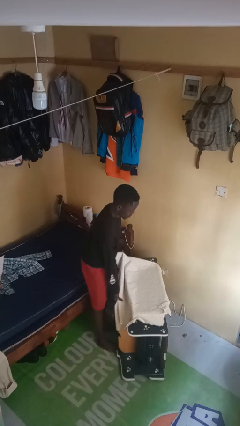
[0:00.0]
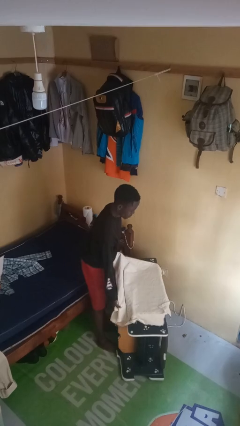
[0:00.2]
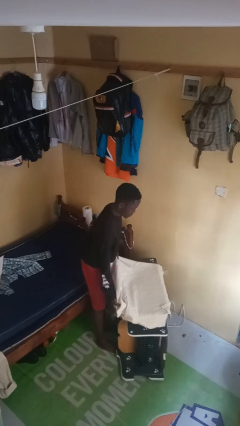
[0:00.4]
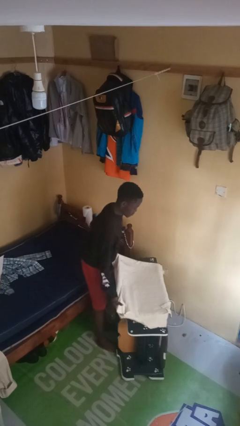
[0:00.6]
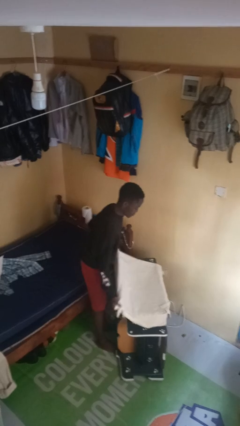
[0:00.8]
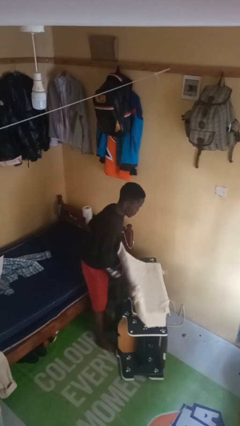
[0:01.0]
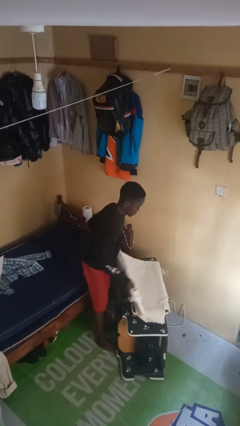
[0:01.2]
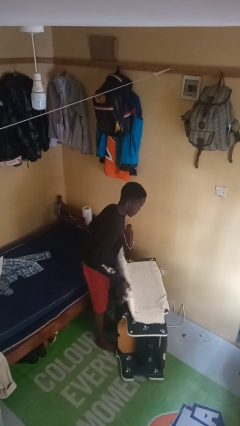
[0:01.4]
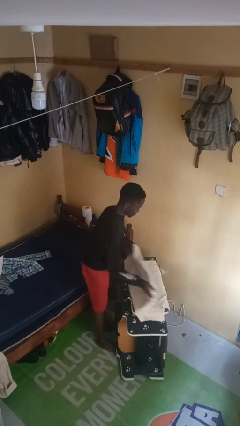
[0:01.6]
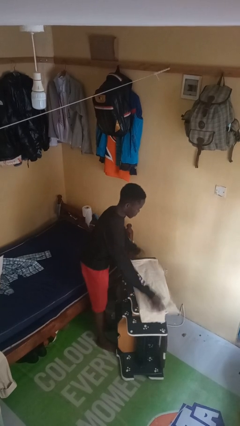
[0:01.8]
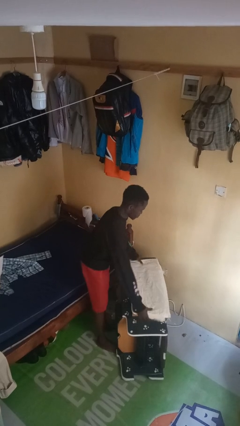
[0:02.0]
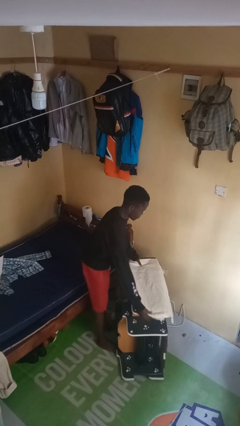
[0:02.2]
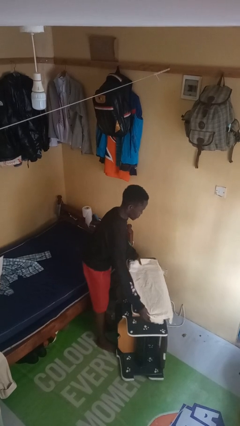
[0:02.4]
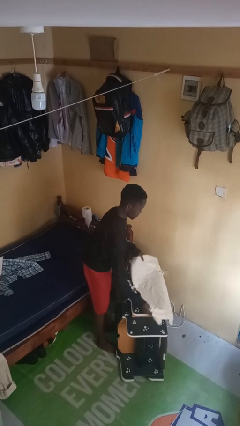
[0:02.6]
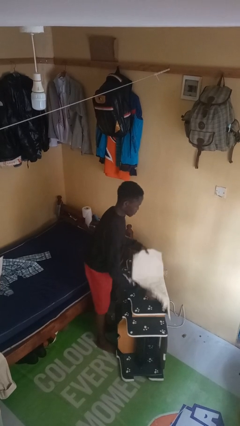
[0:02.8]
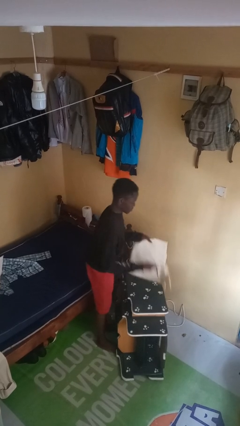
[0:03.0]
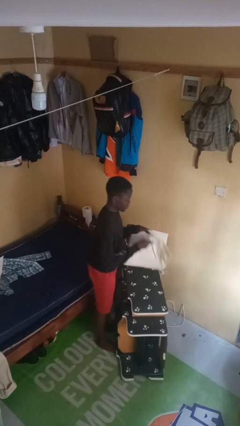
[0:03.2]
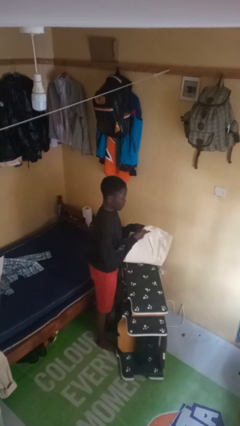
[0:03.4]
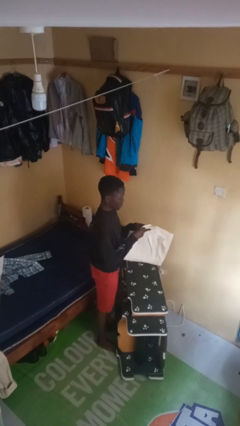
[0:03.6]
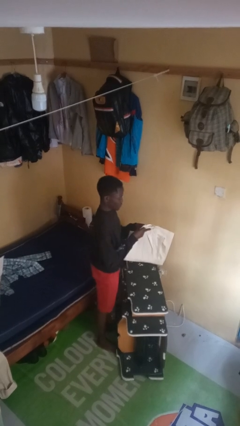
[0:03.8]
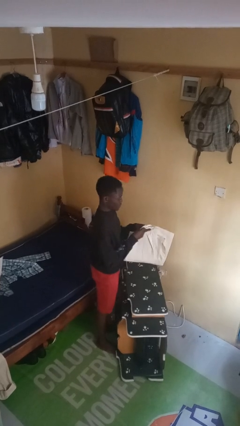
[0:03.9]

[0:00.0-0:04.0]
person folds tablecloth

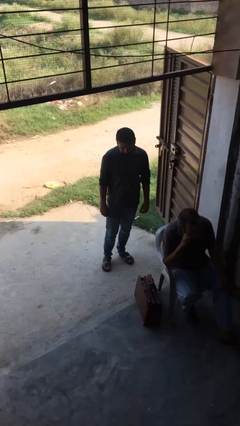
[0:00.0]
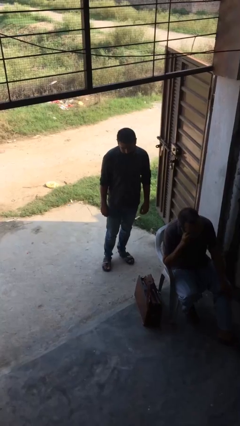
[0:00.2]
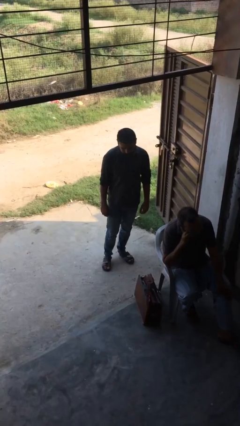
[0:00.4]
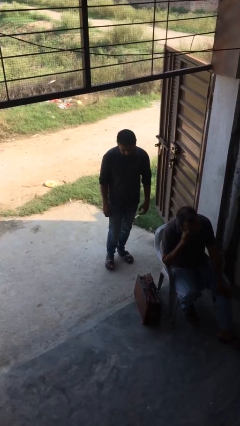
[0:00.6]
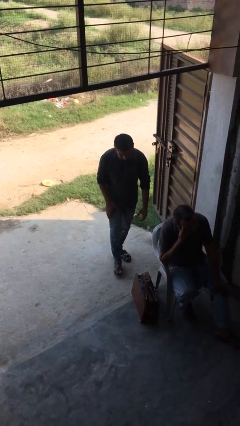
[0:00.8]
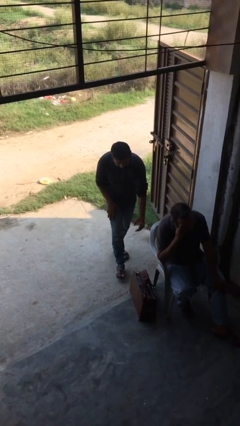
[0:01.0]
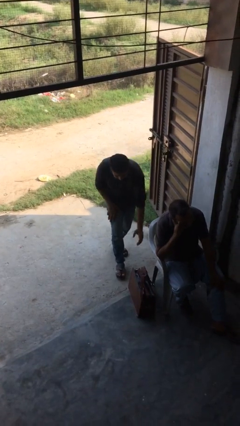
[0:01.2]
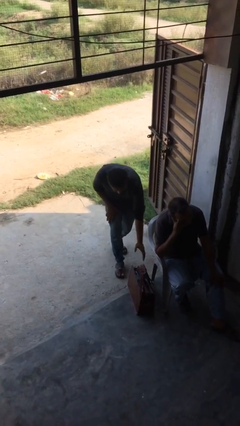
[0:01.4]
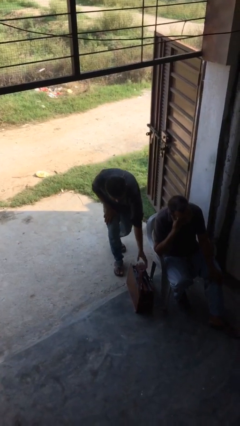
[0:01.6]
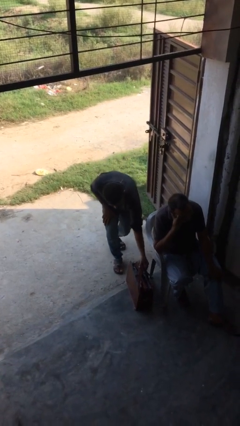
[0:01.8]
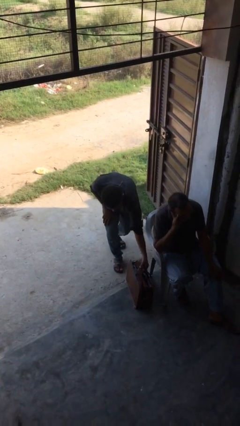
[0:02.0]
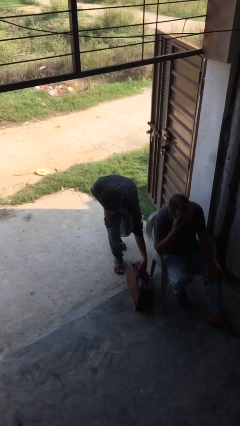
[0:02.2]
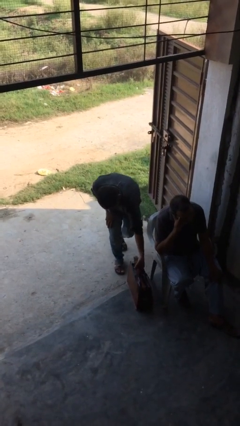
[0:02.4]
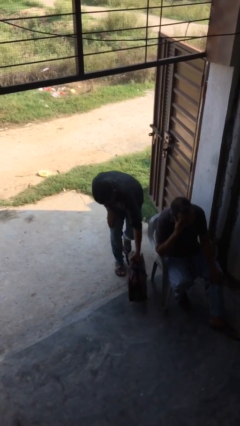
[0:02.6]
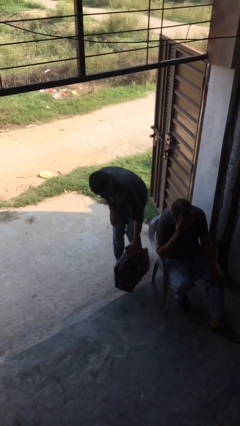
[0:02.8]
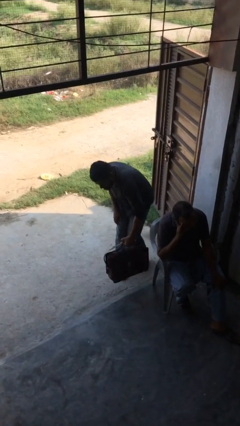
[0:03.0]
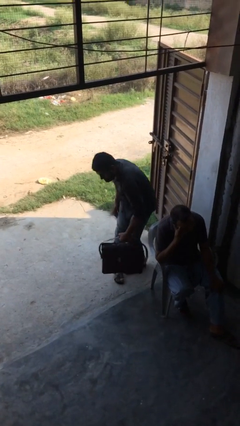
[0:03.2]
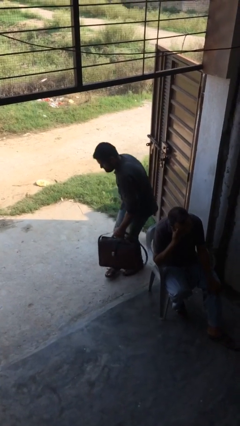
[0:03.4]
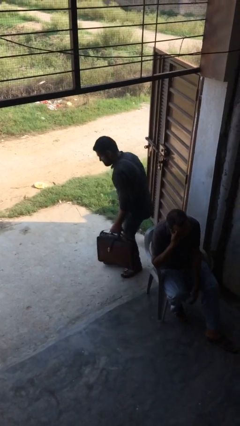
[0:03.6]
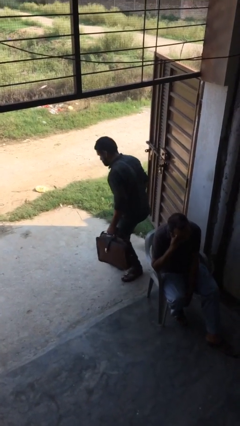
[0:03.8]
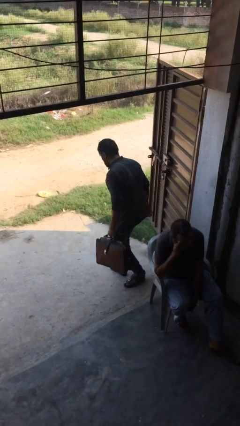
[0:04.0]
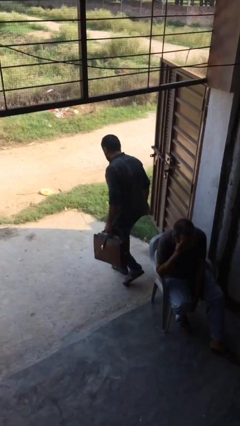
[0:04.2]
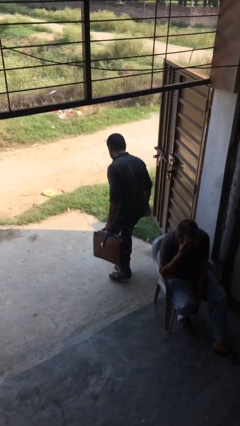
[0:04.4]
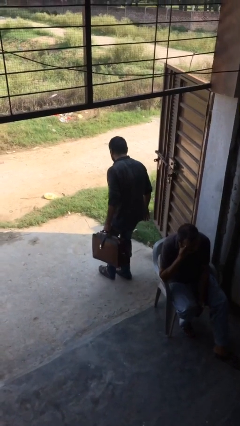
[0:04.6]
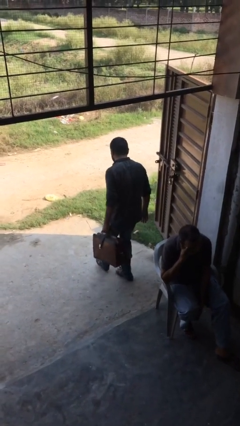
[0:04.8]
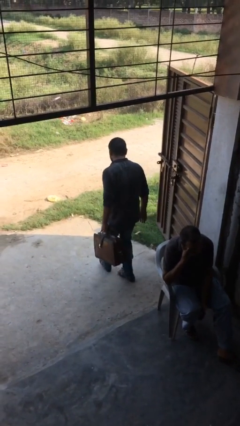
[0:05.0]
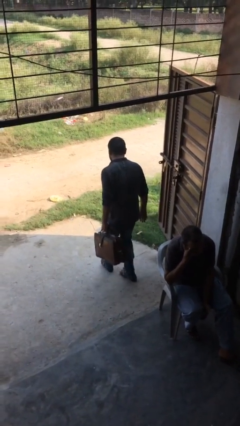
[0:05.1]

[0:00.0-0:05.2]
person steals object from person

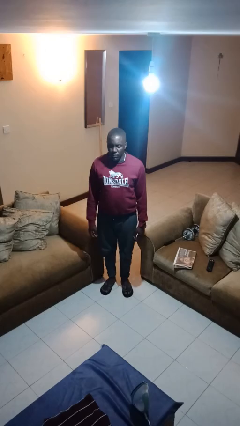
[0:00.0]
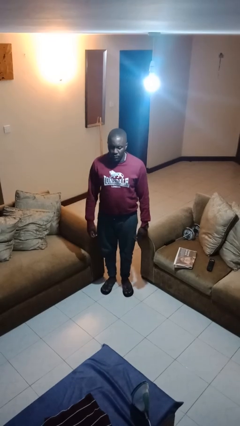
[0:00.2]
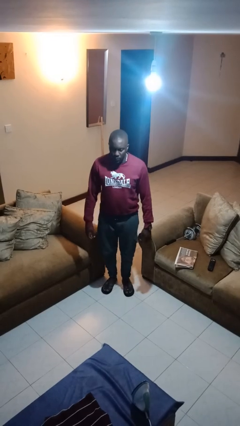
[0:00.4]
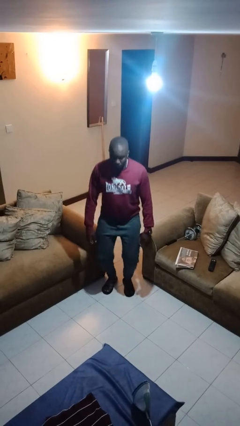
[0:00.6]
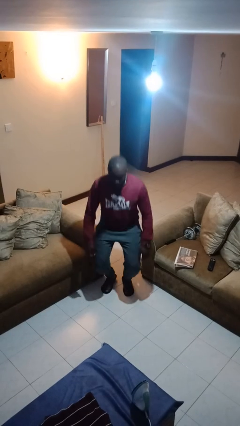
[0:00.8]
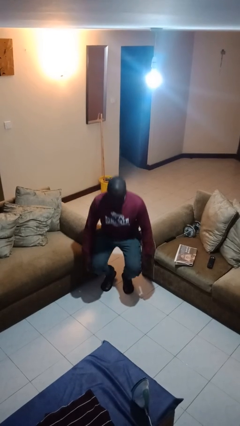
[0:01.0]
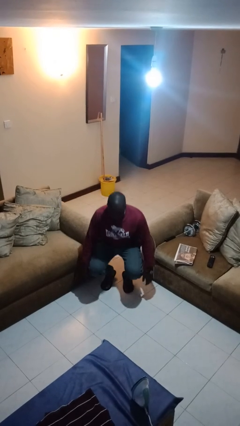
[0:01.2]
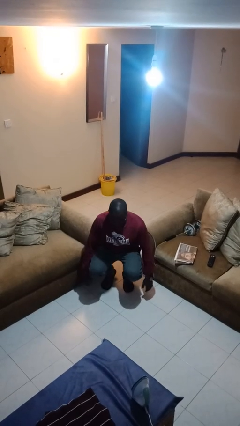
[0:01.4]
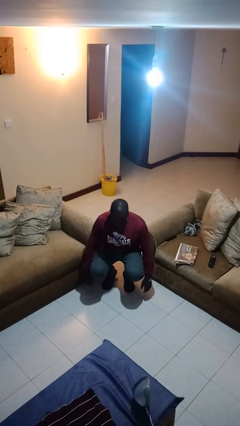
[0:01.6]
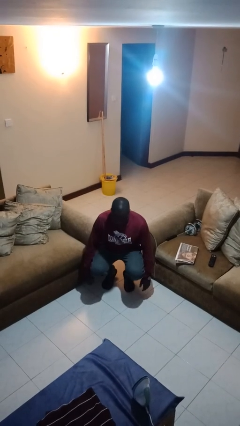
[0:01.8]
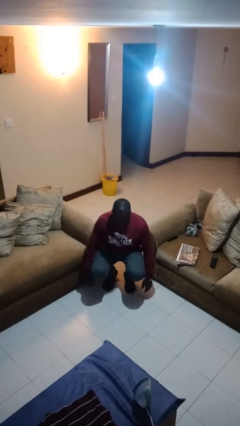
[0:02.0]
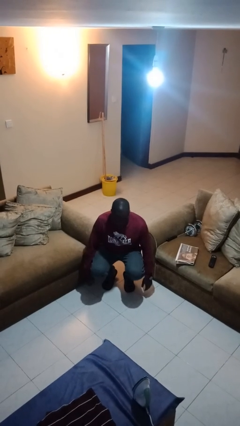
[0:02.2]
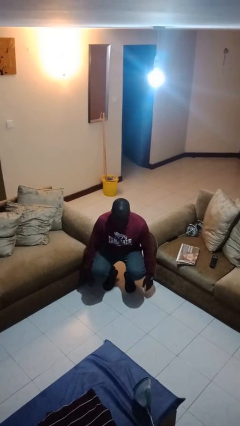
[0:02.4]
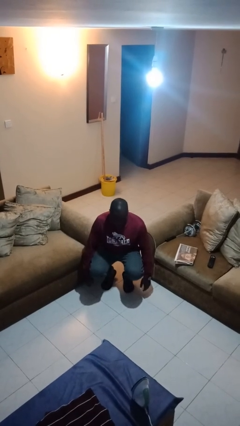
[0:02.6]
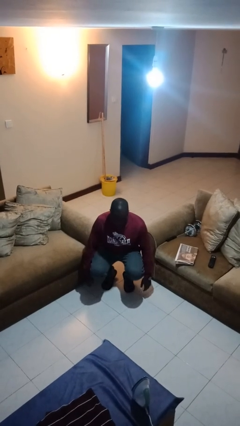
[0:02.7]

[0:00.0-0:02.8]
person squats

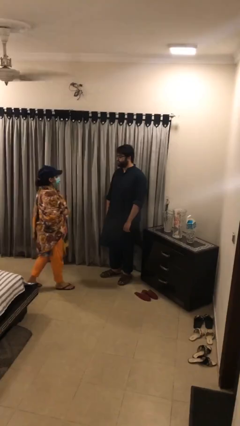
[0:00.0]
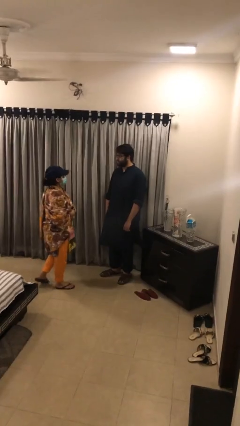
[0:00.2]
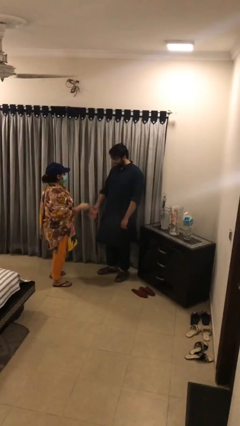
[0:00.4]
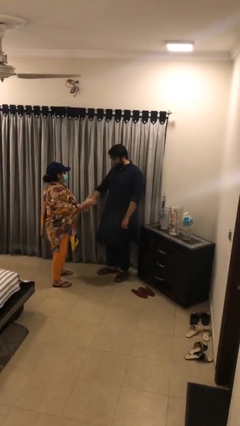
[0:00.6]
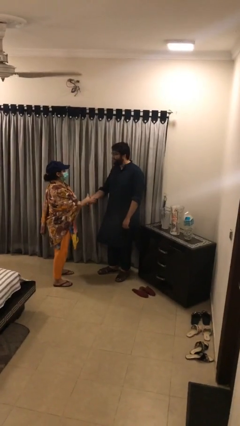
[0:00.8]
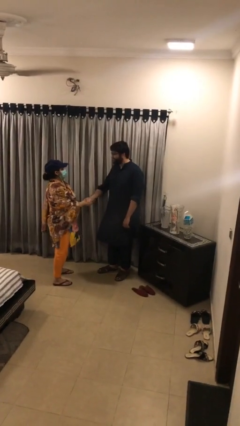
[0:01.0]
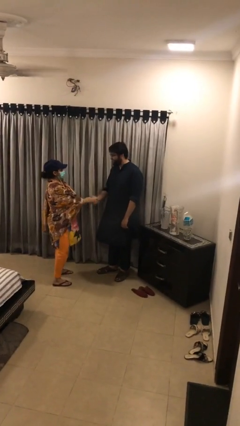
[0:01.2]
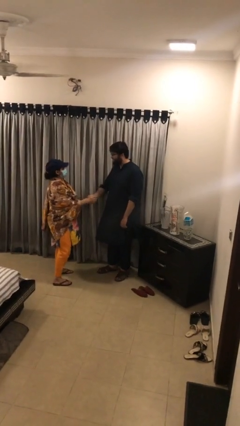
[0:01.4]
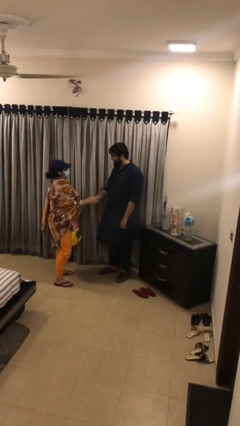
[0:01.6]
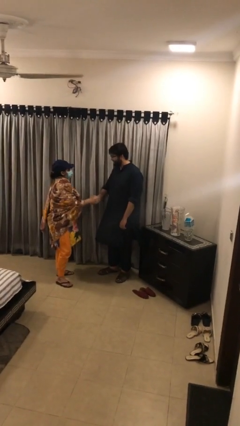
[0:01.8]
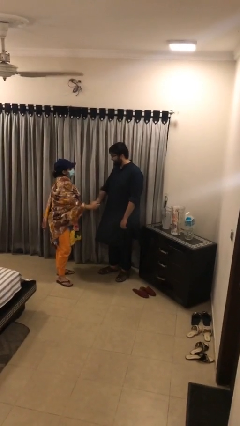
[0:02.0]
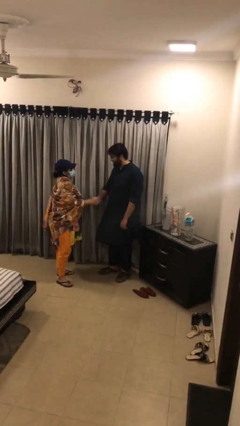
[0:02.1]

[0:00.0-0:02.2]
person shakes hand

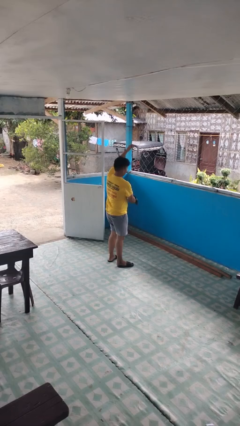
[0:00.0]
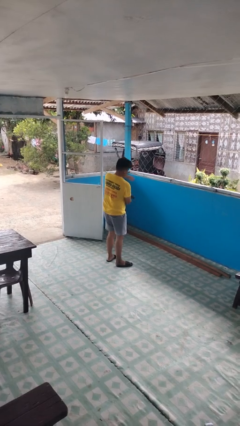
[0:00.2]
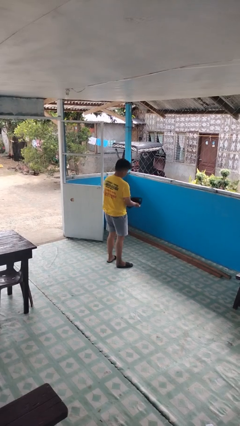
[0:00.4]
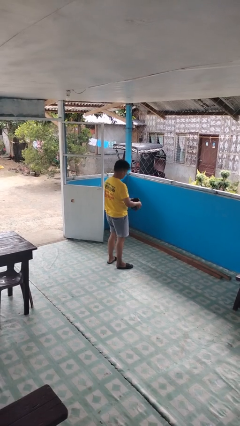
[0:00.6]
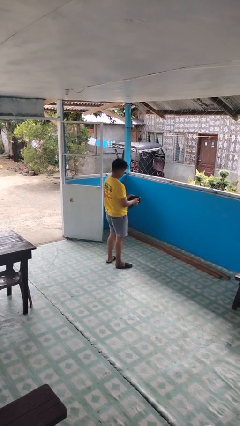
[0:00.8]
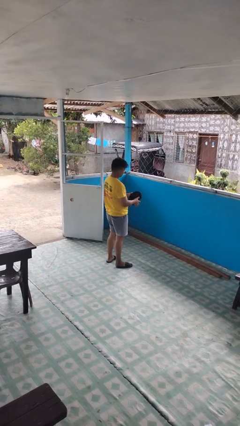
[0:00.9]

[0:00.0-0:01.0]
person catches dropped object

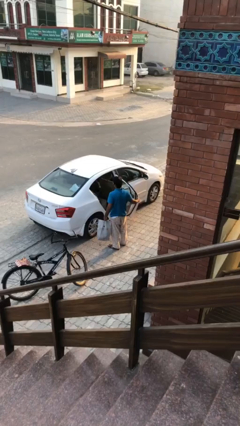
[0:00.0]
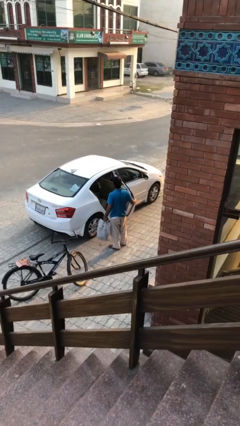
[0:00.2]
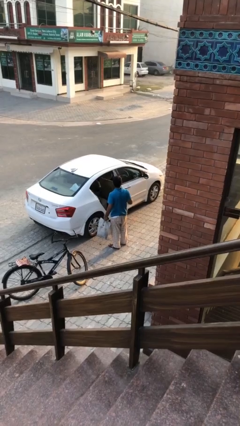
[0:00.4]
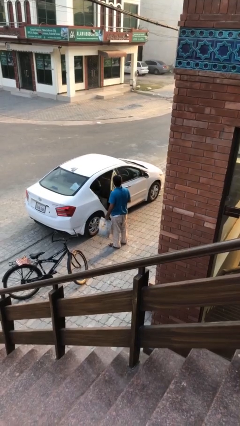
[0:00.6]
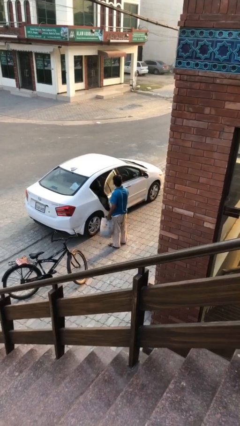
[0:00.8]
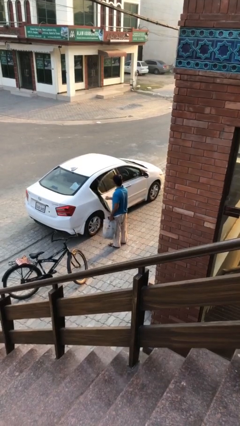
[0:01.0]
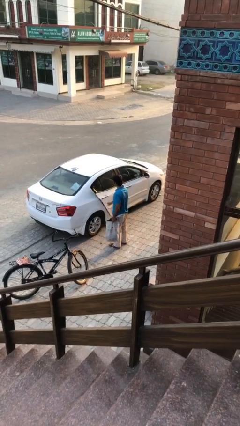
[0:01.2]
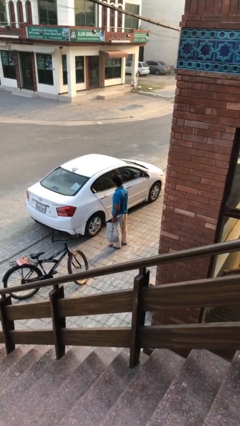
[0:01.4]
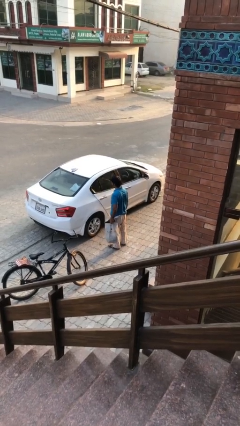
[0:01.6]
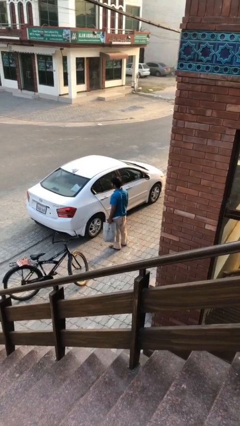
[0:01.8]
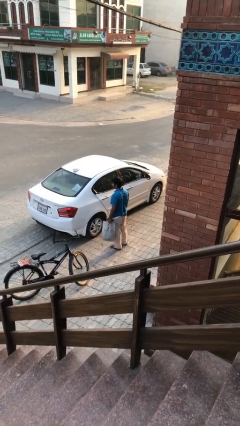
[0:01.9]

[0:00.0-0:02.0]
person closes car door

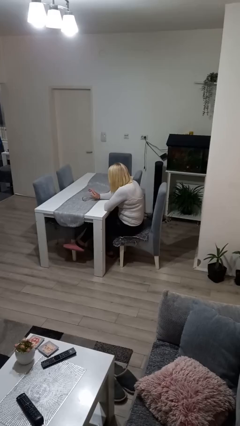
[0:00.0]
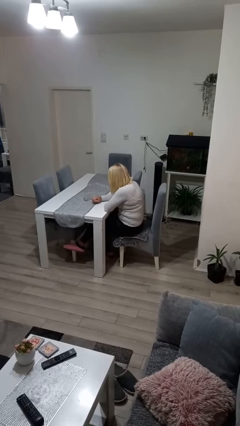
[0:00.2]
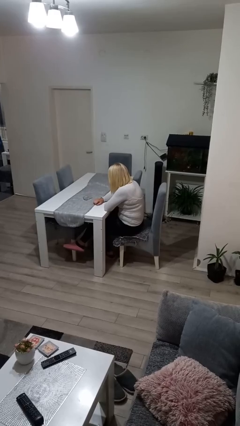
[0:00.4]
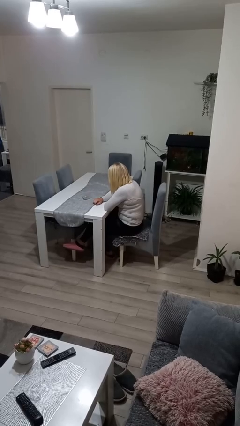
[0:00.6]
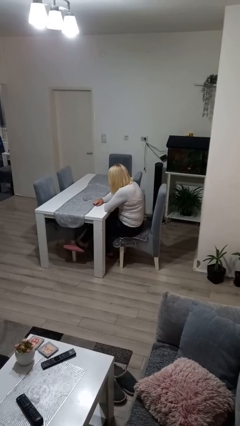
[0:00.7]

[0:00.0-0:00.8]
person knocks over glass
